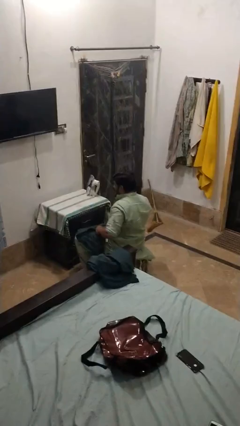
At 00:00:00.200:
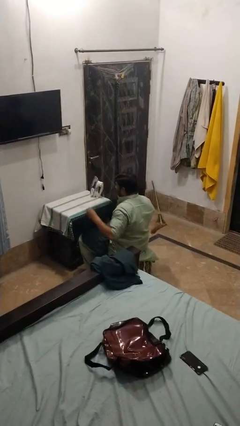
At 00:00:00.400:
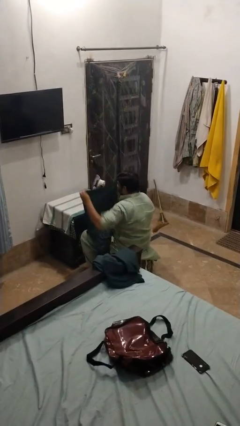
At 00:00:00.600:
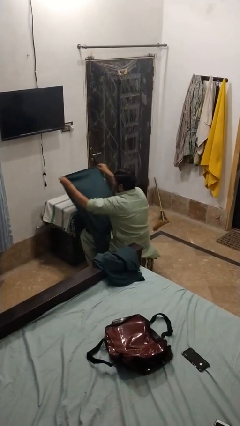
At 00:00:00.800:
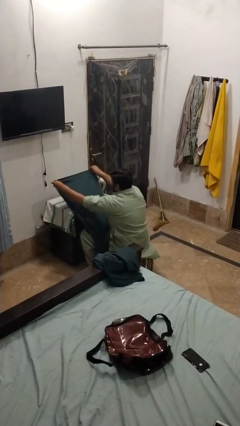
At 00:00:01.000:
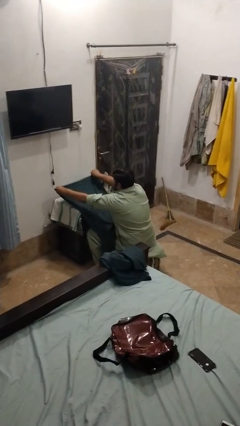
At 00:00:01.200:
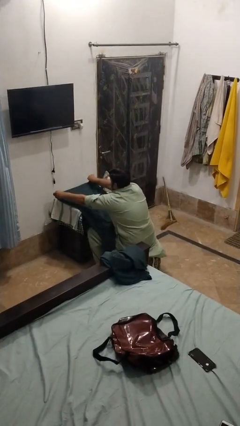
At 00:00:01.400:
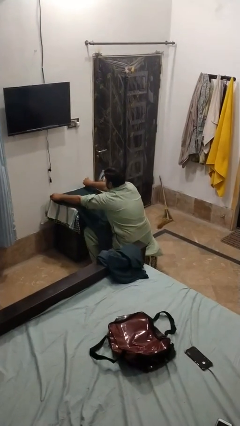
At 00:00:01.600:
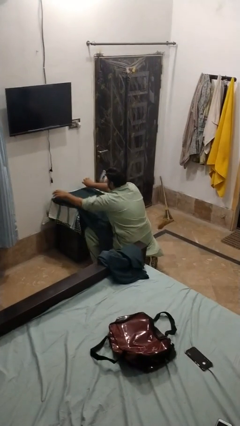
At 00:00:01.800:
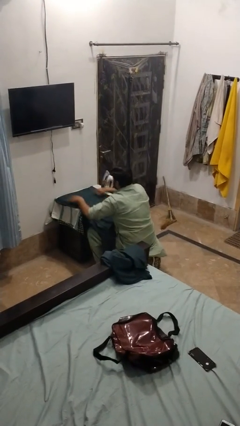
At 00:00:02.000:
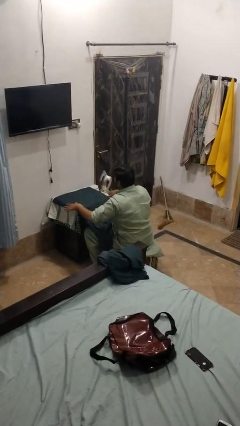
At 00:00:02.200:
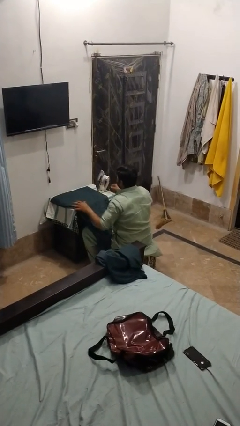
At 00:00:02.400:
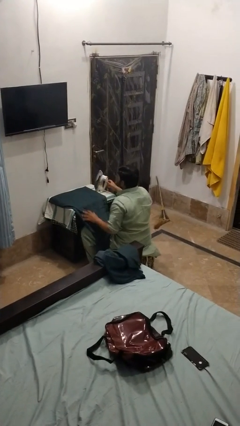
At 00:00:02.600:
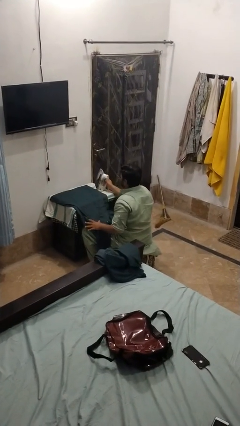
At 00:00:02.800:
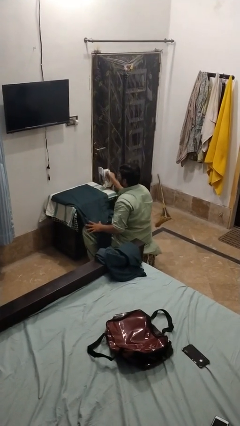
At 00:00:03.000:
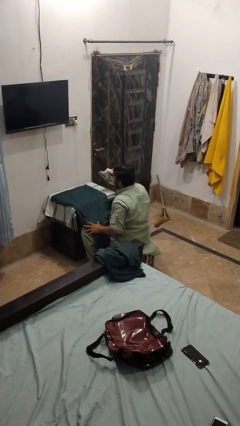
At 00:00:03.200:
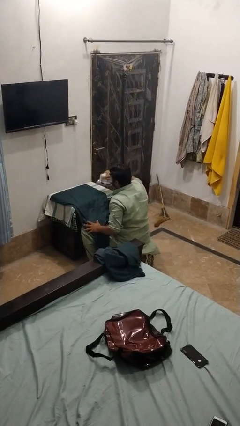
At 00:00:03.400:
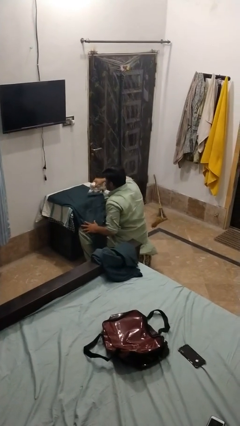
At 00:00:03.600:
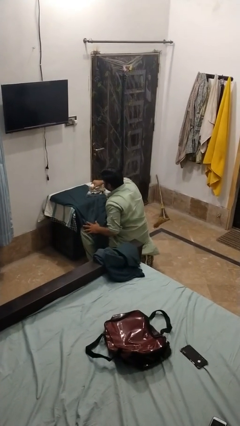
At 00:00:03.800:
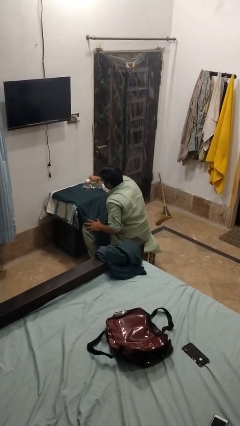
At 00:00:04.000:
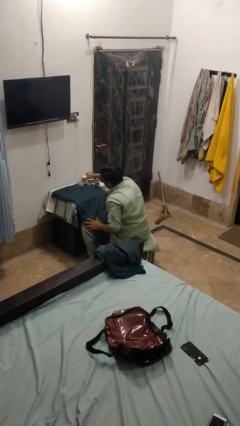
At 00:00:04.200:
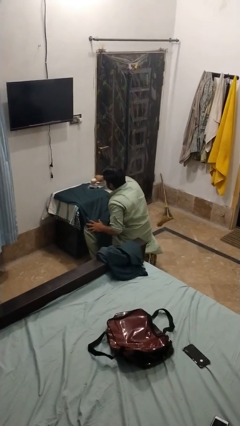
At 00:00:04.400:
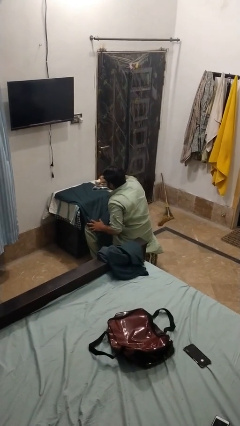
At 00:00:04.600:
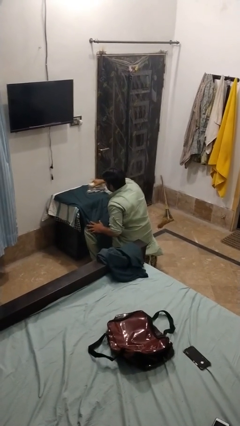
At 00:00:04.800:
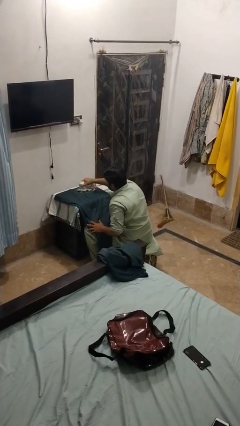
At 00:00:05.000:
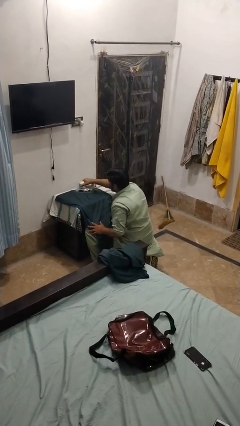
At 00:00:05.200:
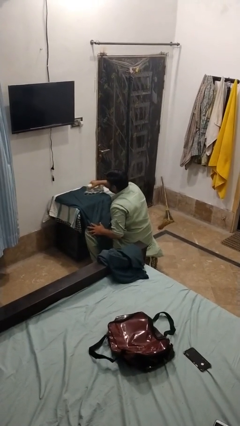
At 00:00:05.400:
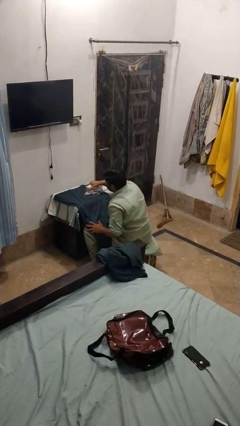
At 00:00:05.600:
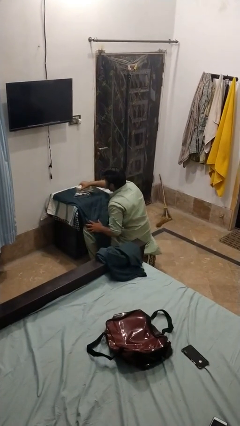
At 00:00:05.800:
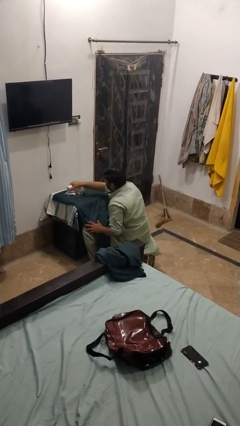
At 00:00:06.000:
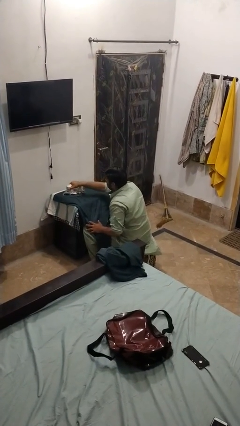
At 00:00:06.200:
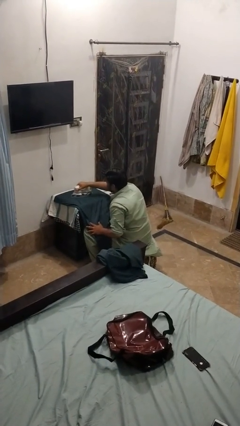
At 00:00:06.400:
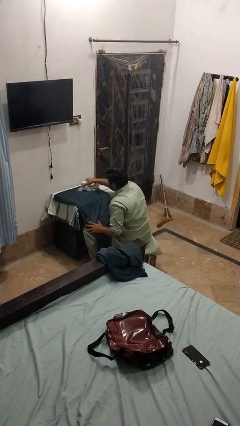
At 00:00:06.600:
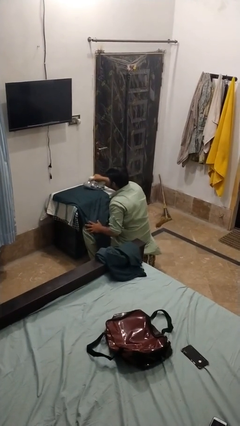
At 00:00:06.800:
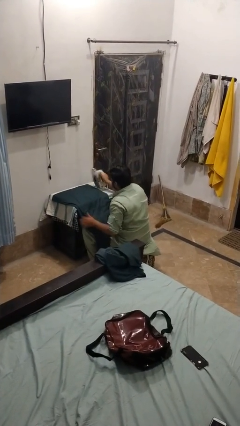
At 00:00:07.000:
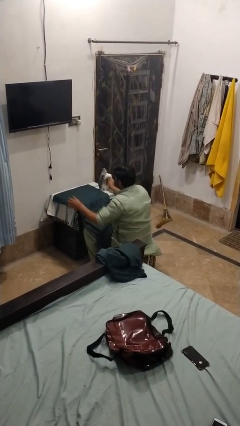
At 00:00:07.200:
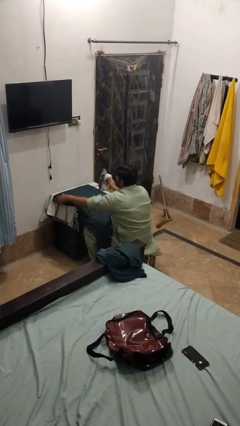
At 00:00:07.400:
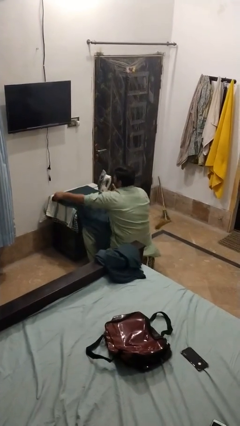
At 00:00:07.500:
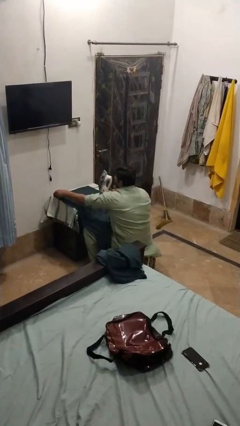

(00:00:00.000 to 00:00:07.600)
person irons clothes

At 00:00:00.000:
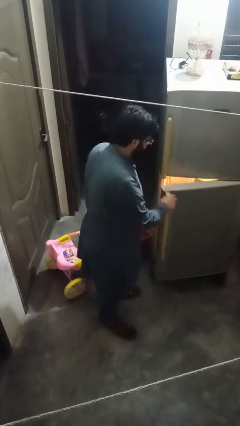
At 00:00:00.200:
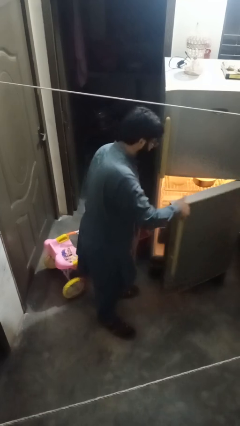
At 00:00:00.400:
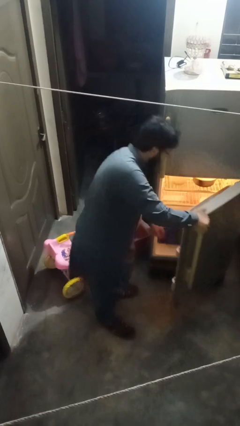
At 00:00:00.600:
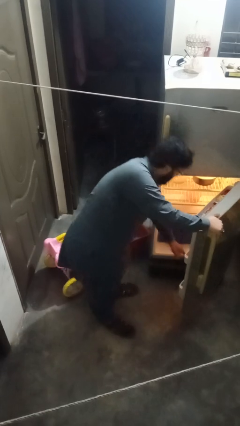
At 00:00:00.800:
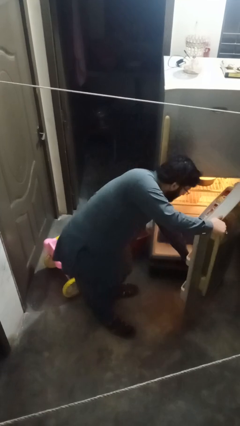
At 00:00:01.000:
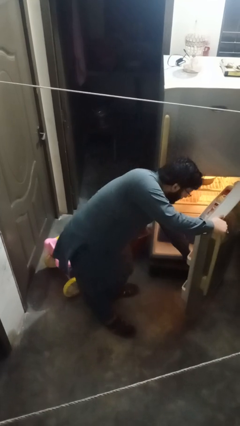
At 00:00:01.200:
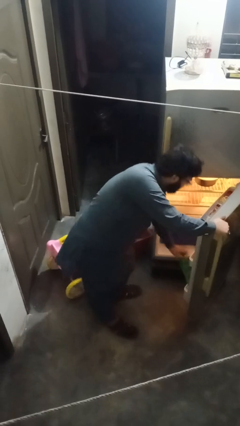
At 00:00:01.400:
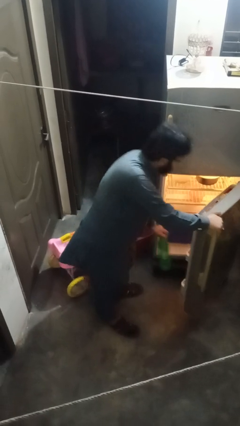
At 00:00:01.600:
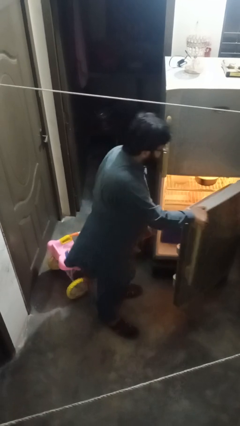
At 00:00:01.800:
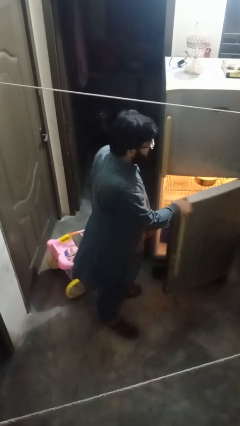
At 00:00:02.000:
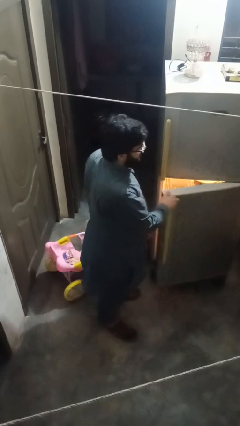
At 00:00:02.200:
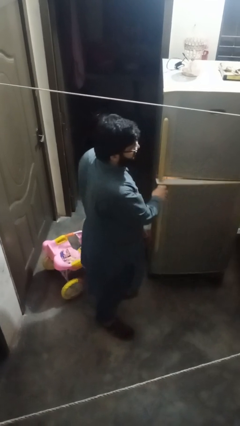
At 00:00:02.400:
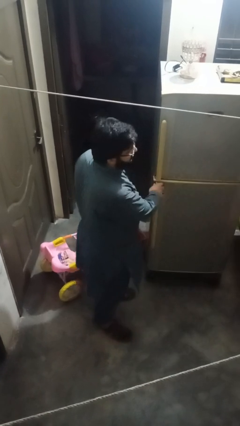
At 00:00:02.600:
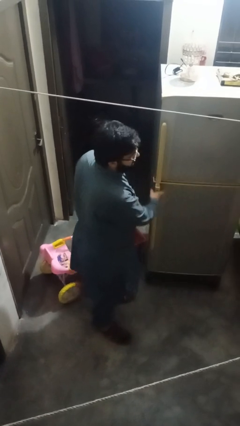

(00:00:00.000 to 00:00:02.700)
person takes object from refrigerator

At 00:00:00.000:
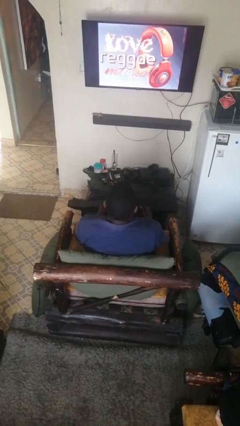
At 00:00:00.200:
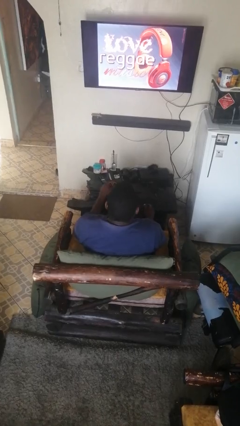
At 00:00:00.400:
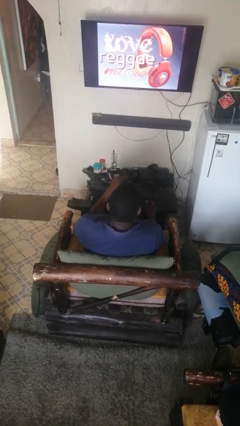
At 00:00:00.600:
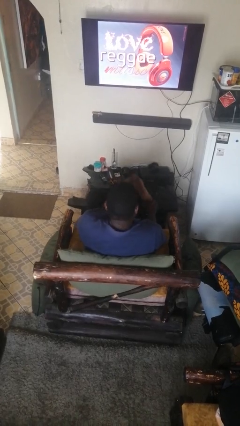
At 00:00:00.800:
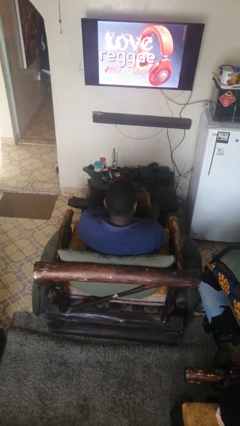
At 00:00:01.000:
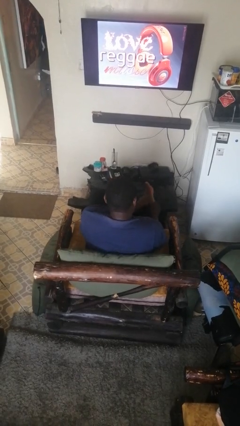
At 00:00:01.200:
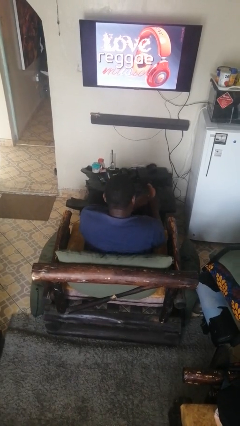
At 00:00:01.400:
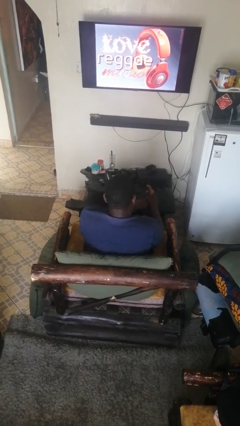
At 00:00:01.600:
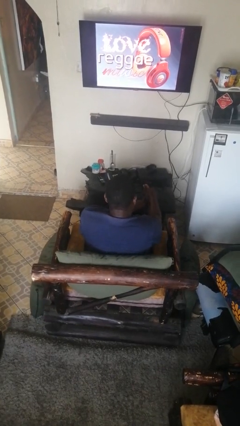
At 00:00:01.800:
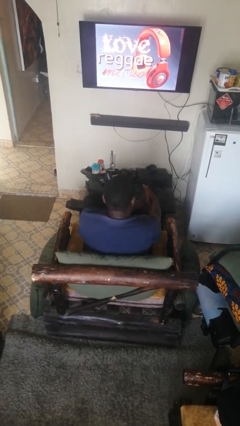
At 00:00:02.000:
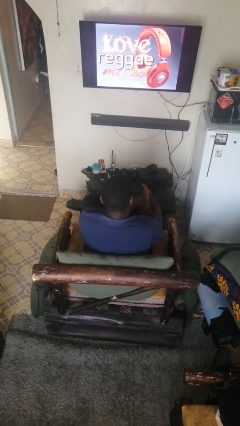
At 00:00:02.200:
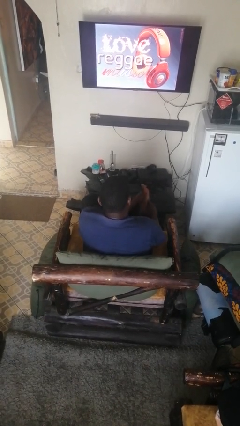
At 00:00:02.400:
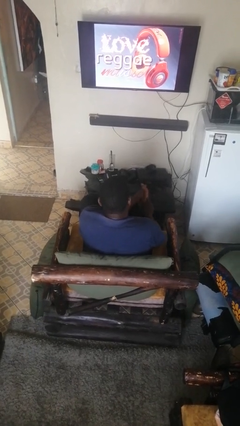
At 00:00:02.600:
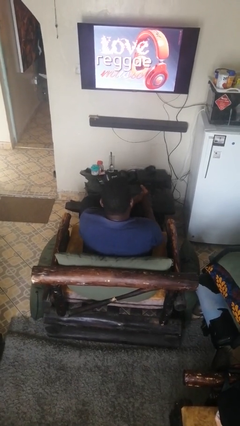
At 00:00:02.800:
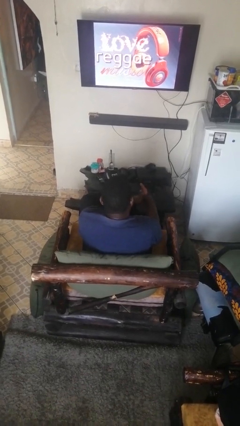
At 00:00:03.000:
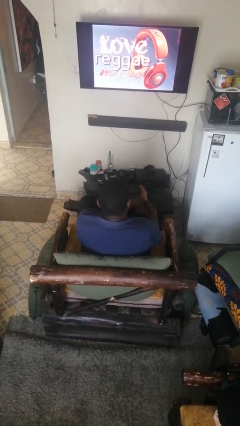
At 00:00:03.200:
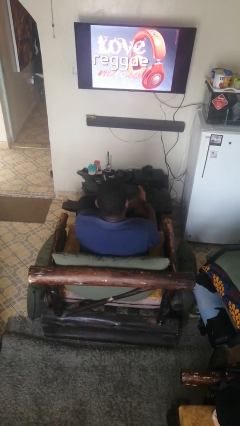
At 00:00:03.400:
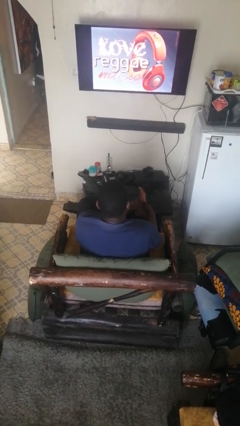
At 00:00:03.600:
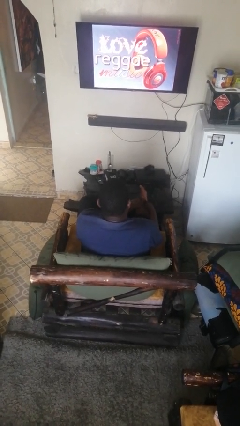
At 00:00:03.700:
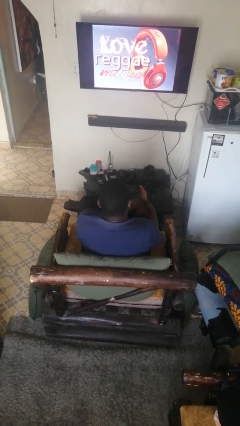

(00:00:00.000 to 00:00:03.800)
person rubs foot

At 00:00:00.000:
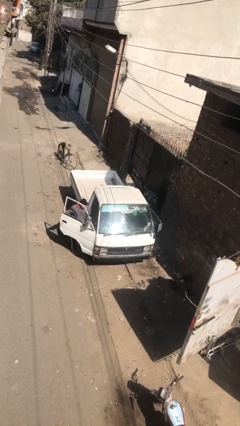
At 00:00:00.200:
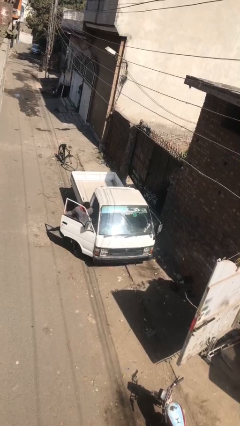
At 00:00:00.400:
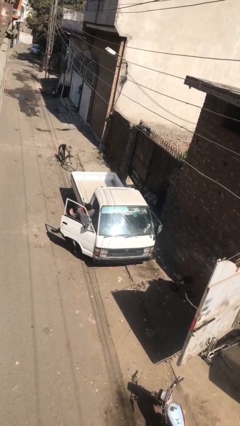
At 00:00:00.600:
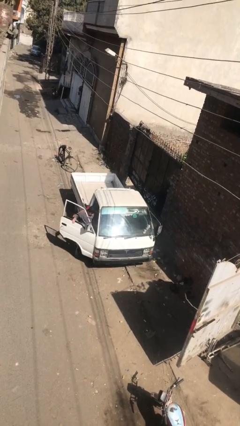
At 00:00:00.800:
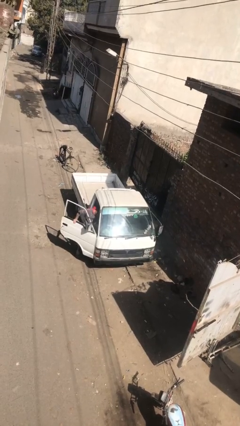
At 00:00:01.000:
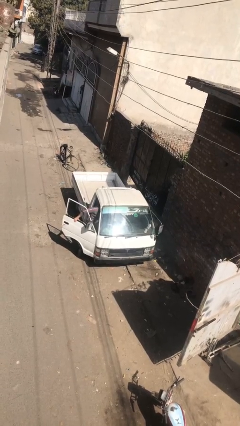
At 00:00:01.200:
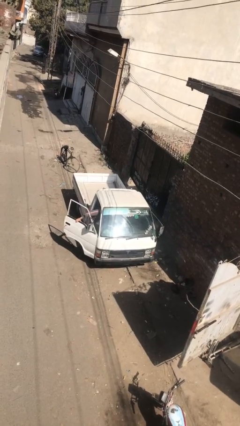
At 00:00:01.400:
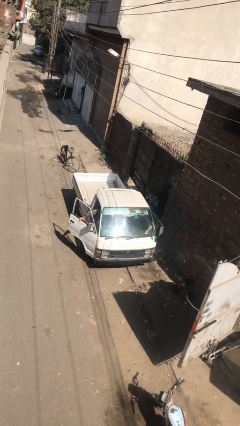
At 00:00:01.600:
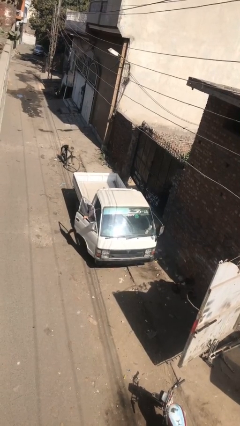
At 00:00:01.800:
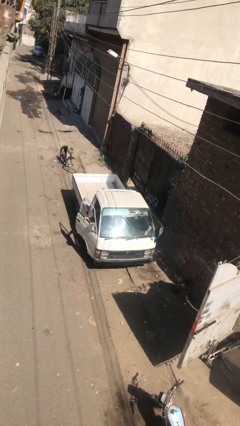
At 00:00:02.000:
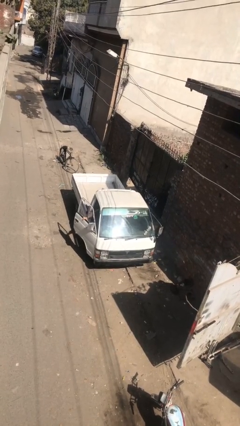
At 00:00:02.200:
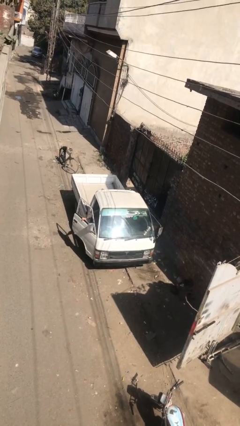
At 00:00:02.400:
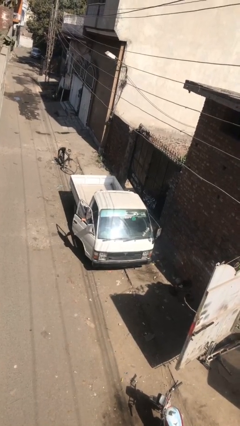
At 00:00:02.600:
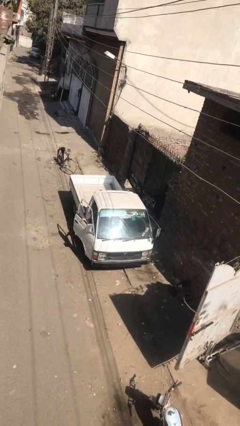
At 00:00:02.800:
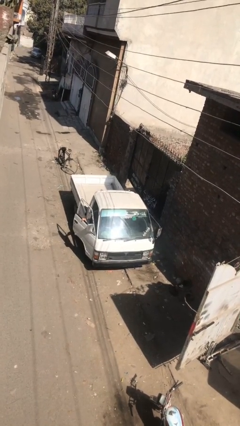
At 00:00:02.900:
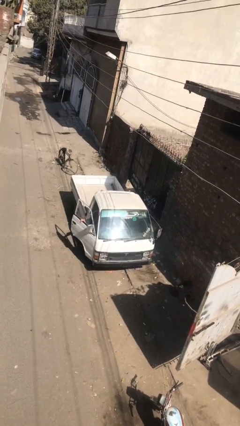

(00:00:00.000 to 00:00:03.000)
car picks up person

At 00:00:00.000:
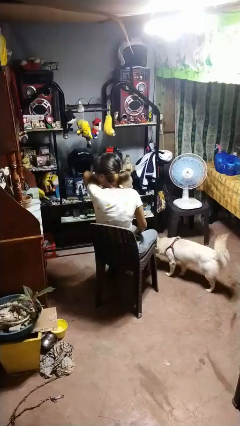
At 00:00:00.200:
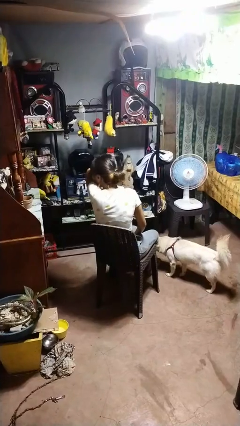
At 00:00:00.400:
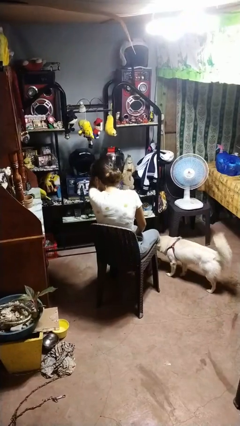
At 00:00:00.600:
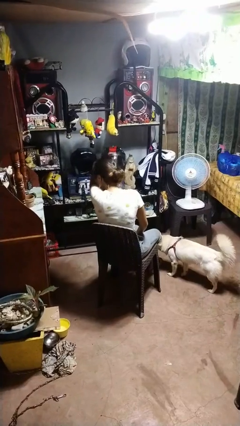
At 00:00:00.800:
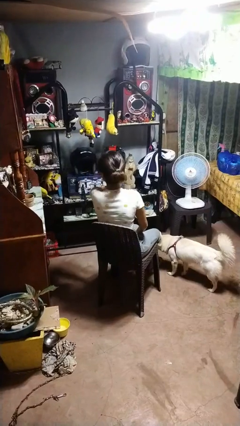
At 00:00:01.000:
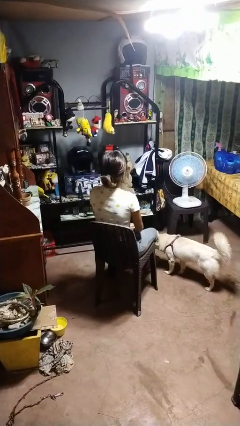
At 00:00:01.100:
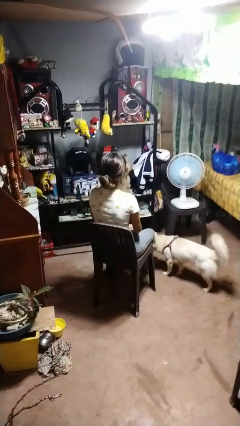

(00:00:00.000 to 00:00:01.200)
person sneezes into arm
